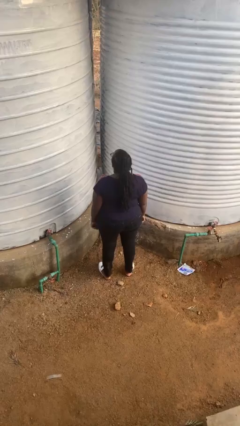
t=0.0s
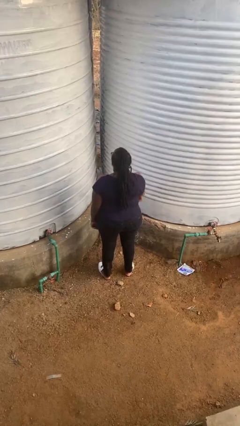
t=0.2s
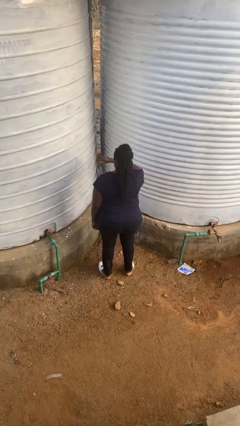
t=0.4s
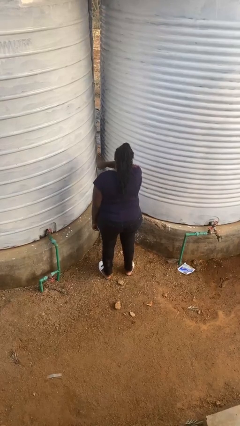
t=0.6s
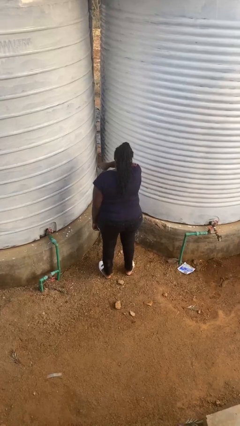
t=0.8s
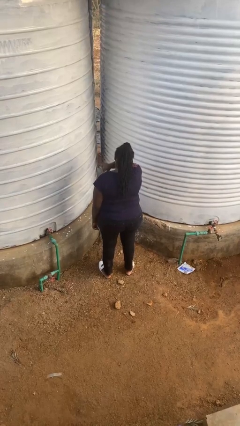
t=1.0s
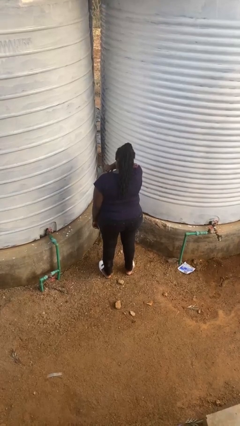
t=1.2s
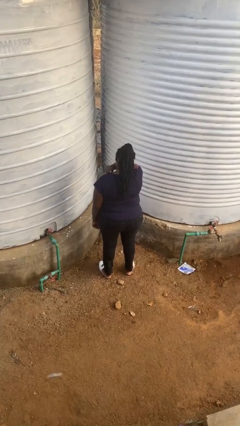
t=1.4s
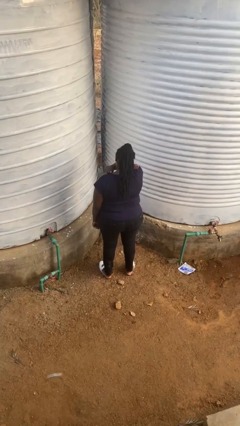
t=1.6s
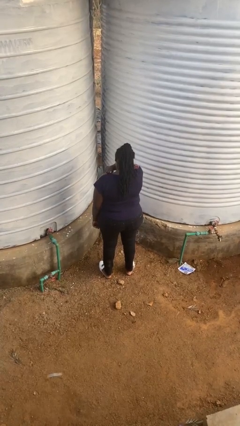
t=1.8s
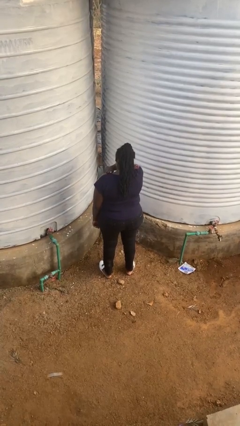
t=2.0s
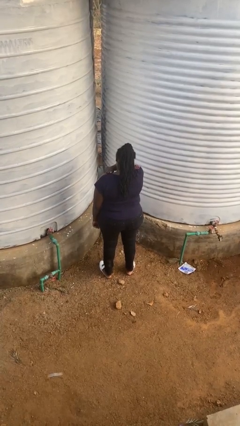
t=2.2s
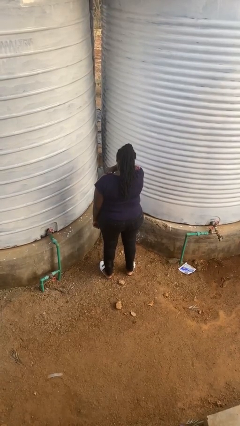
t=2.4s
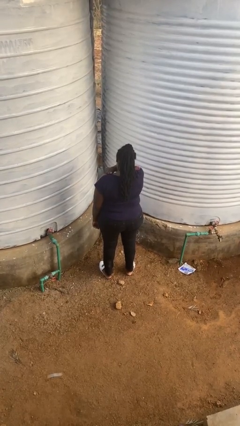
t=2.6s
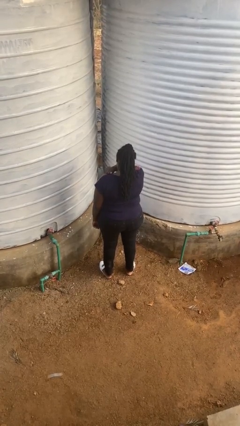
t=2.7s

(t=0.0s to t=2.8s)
person sneezes into arm

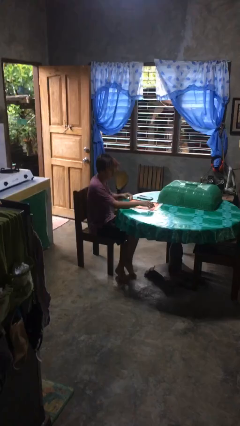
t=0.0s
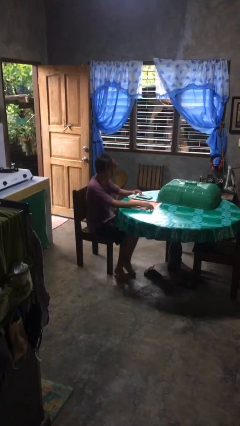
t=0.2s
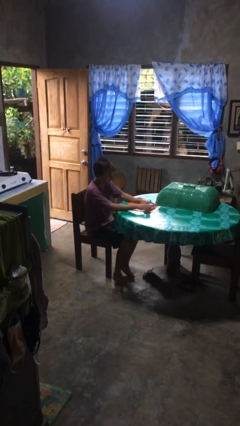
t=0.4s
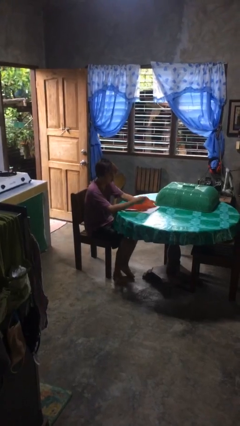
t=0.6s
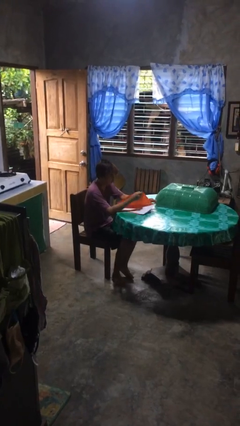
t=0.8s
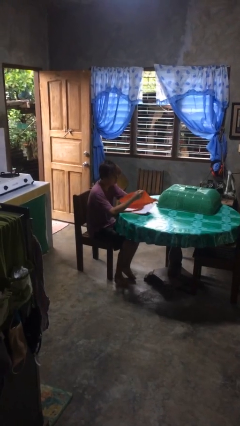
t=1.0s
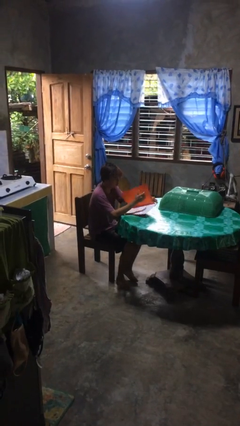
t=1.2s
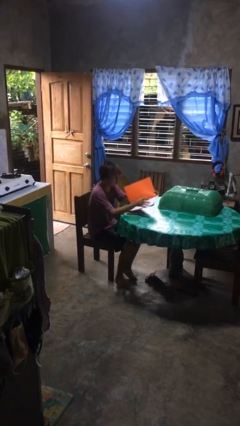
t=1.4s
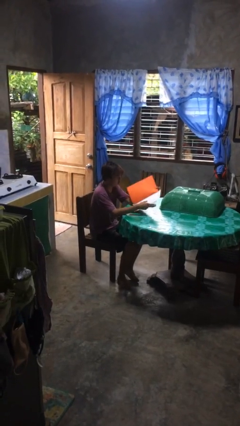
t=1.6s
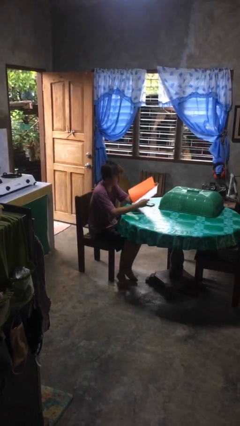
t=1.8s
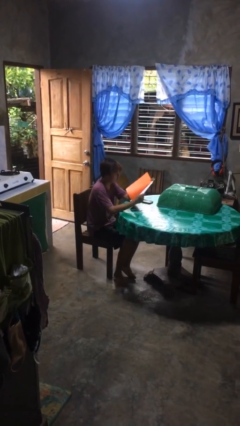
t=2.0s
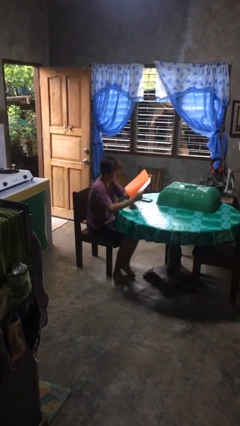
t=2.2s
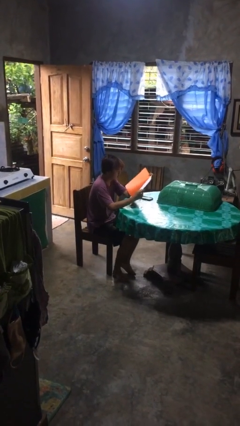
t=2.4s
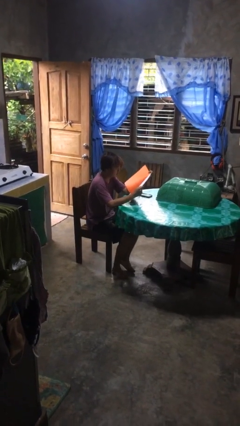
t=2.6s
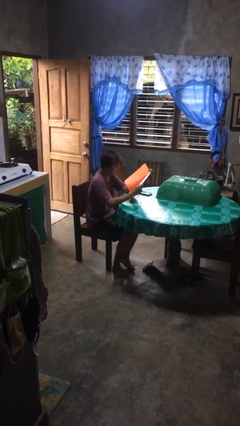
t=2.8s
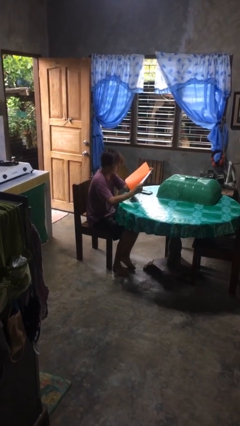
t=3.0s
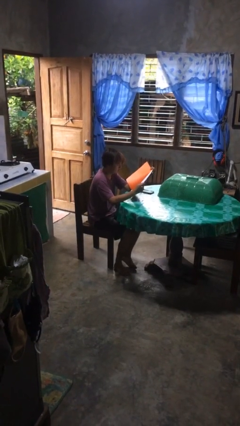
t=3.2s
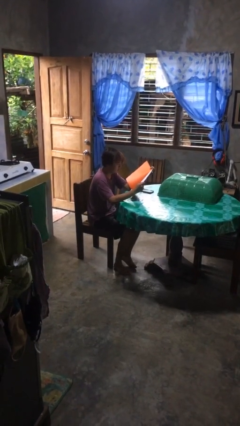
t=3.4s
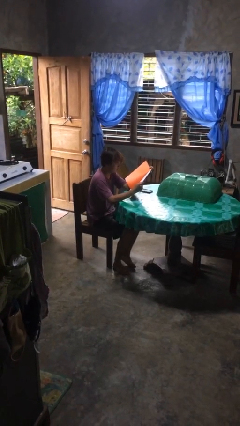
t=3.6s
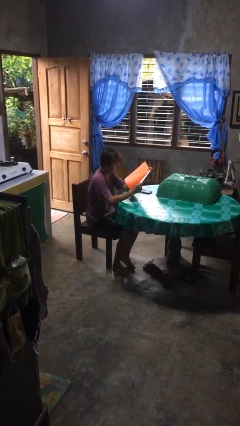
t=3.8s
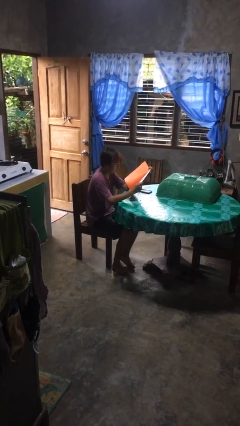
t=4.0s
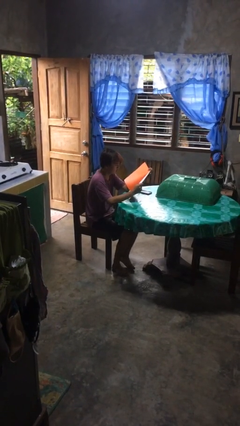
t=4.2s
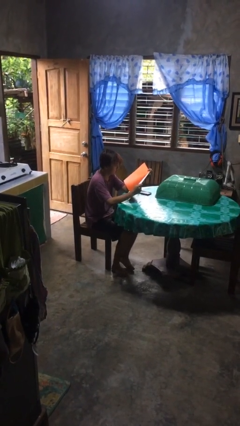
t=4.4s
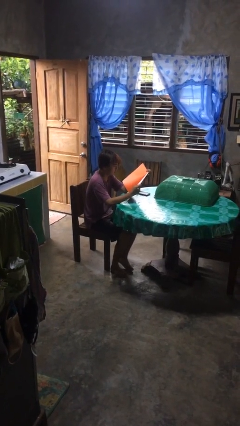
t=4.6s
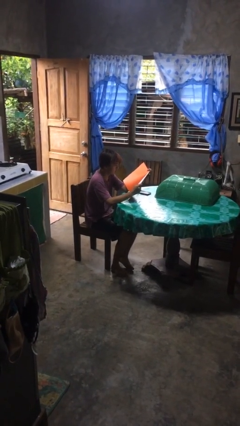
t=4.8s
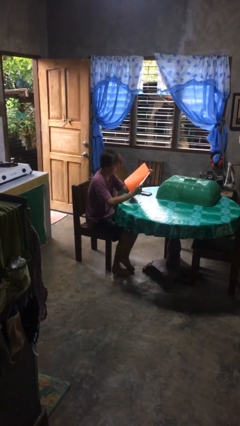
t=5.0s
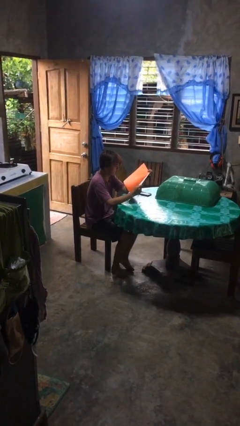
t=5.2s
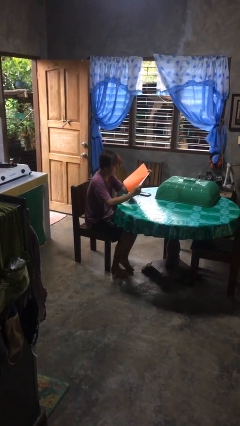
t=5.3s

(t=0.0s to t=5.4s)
person reads document

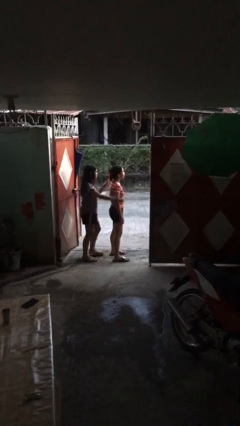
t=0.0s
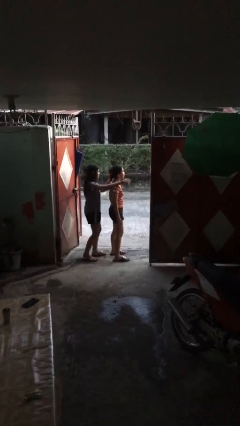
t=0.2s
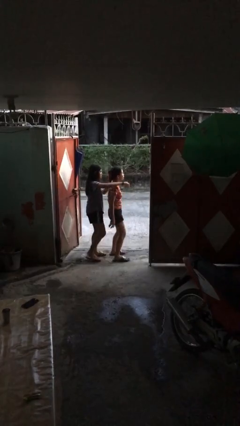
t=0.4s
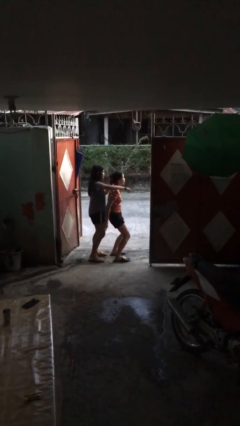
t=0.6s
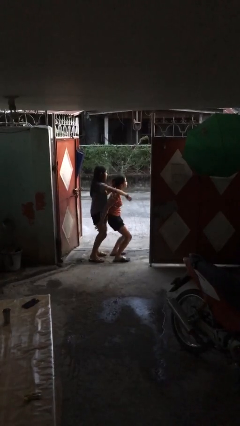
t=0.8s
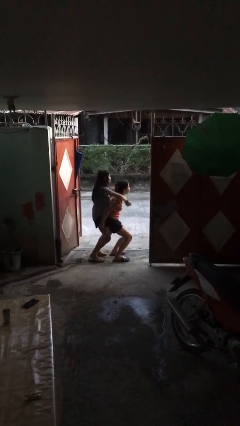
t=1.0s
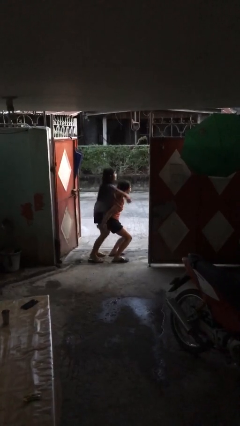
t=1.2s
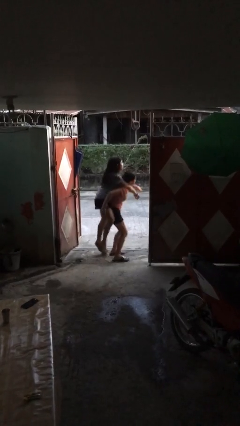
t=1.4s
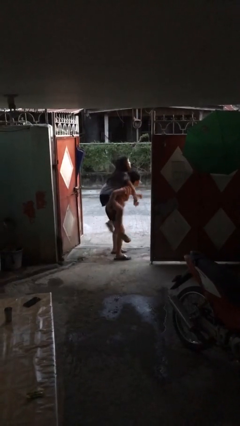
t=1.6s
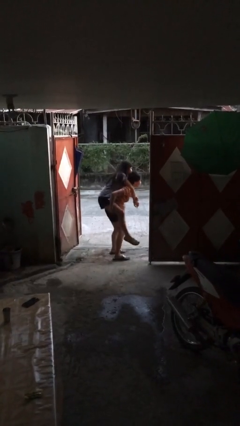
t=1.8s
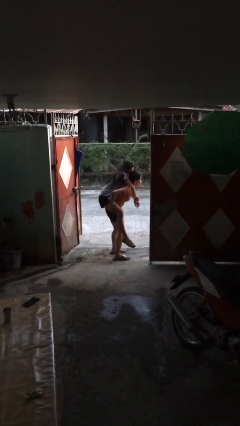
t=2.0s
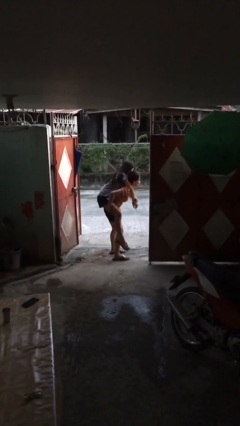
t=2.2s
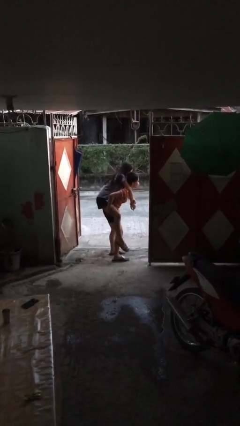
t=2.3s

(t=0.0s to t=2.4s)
person carries person over shoulder

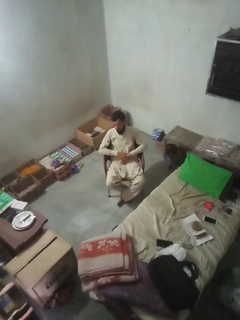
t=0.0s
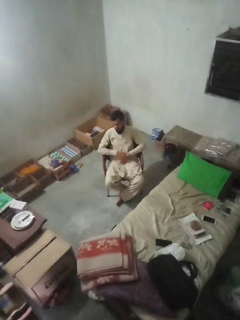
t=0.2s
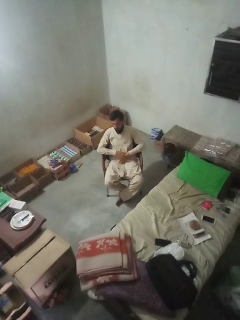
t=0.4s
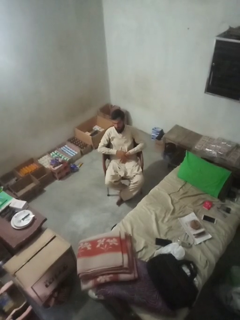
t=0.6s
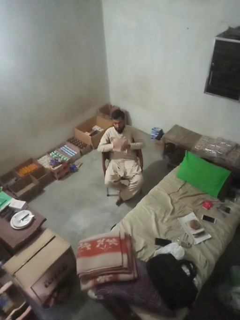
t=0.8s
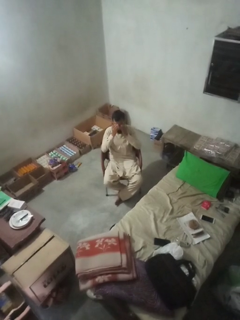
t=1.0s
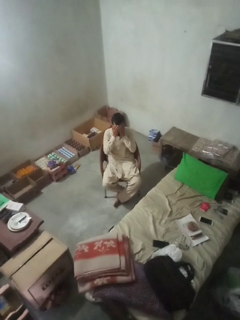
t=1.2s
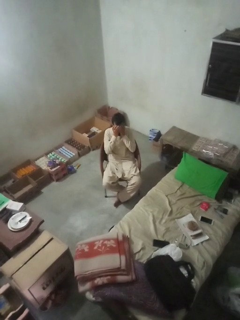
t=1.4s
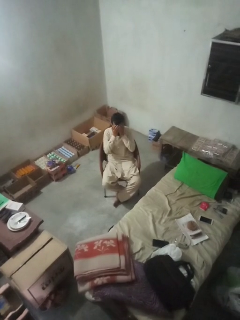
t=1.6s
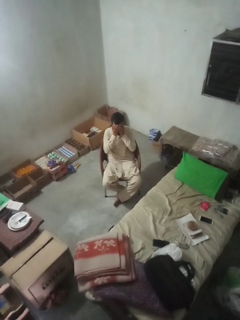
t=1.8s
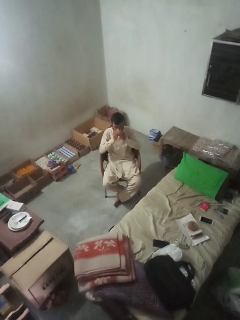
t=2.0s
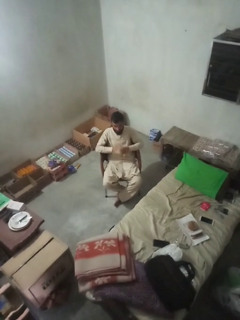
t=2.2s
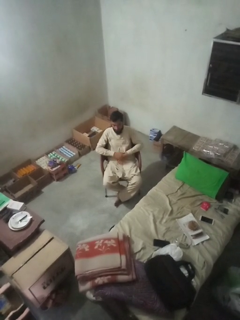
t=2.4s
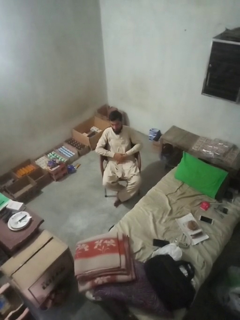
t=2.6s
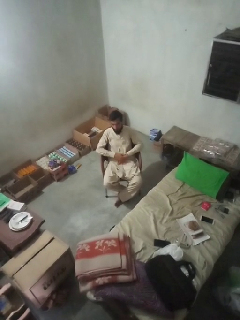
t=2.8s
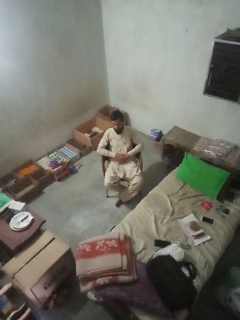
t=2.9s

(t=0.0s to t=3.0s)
person covers face with hands

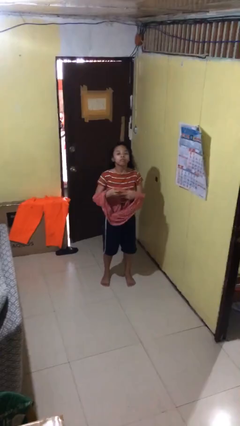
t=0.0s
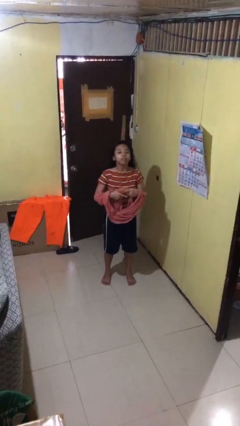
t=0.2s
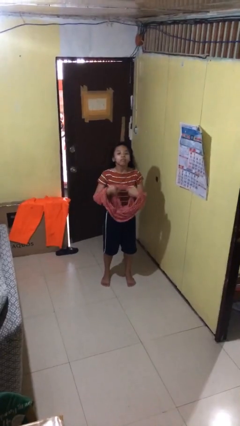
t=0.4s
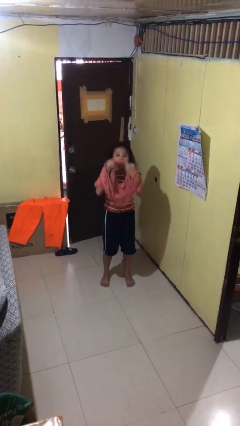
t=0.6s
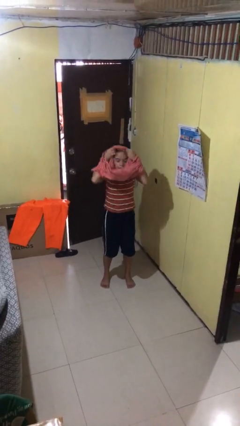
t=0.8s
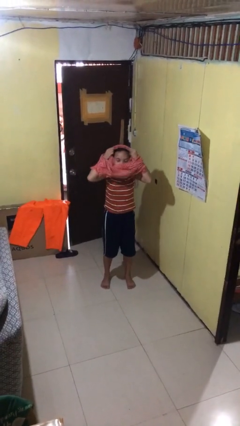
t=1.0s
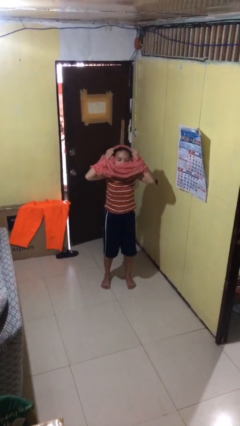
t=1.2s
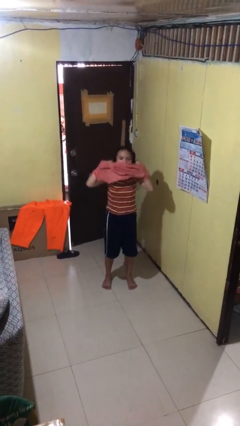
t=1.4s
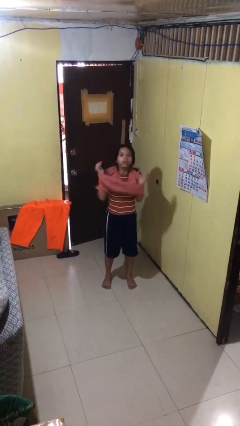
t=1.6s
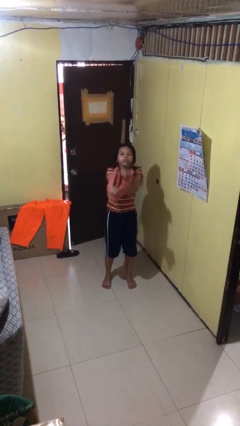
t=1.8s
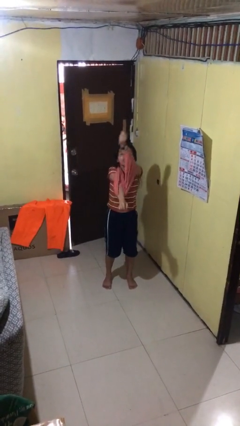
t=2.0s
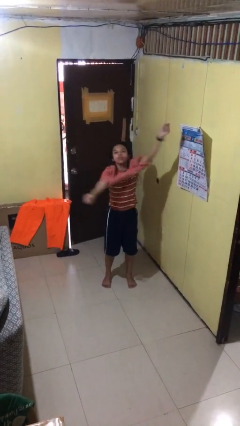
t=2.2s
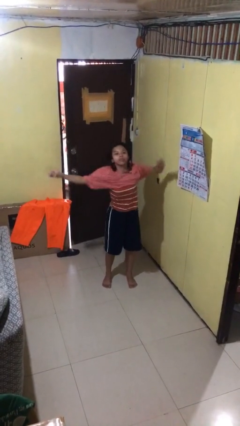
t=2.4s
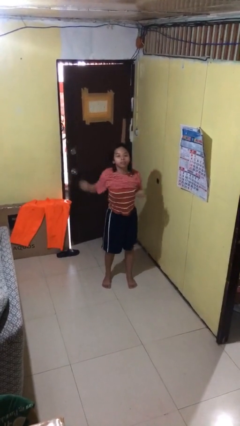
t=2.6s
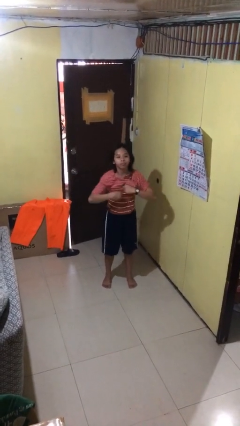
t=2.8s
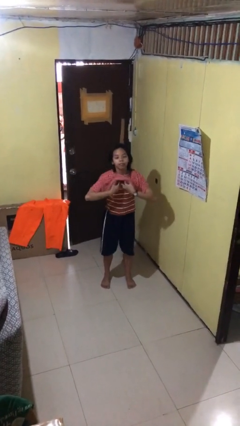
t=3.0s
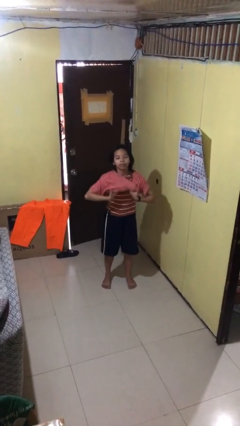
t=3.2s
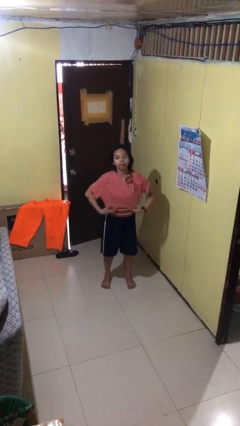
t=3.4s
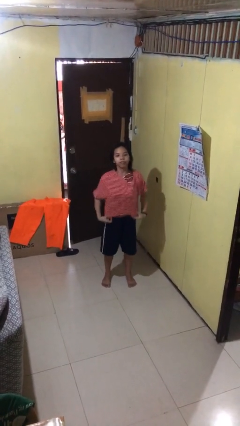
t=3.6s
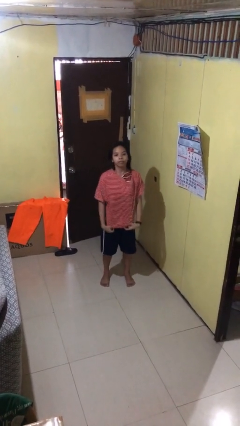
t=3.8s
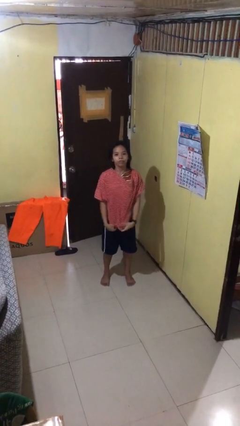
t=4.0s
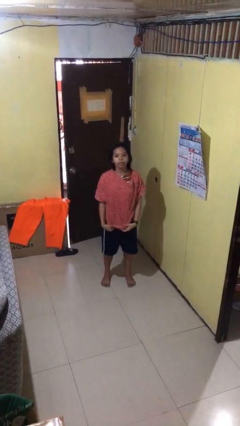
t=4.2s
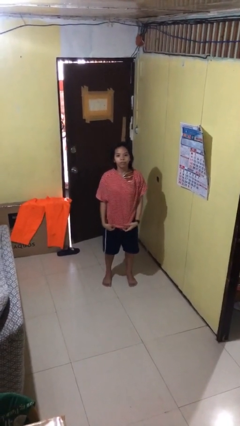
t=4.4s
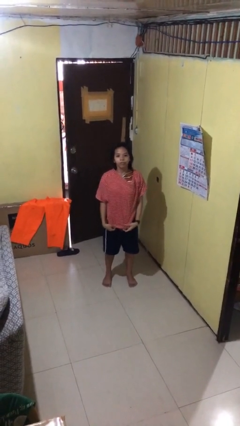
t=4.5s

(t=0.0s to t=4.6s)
person puts on shirt
